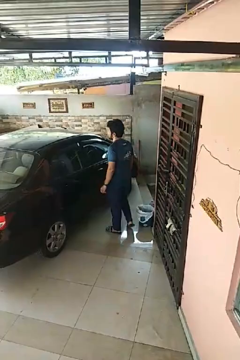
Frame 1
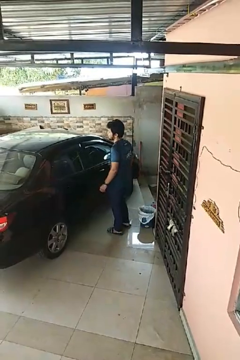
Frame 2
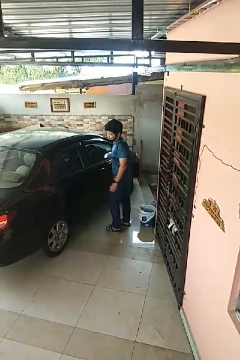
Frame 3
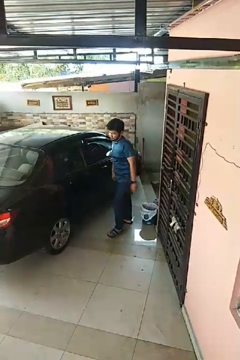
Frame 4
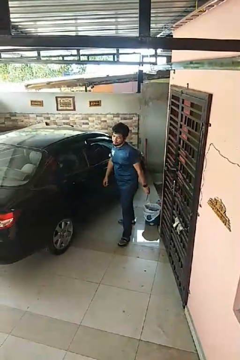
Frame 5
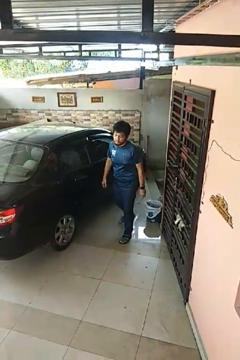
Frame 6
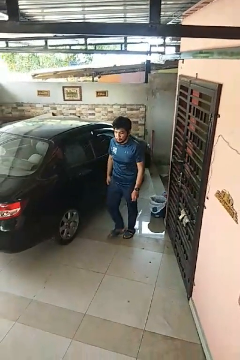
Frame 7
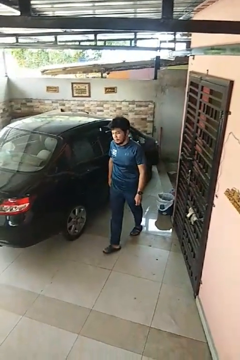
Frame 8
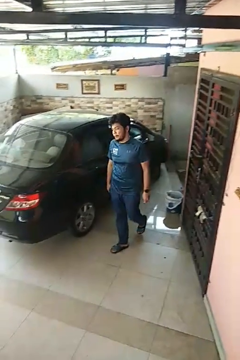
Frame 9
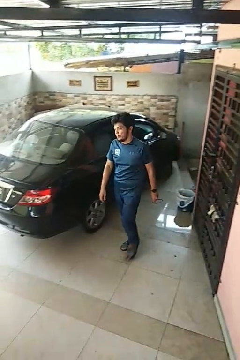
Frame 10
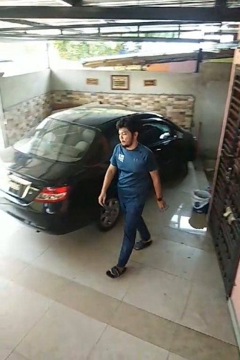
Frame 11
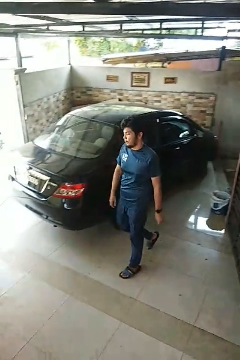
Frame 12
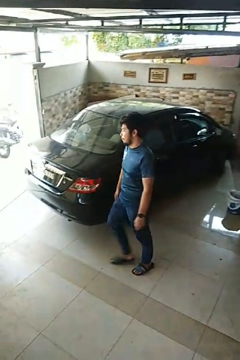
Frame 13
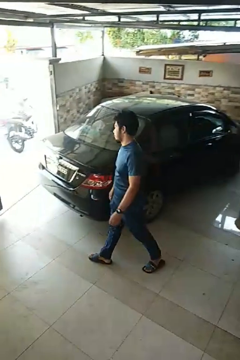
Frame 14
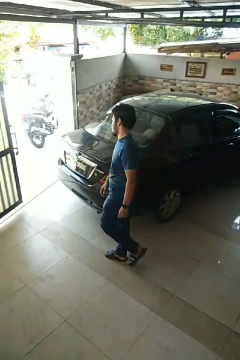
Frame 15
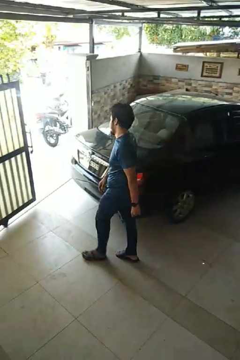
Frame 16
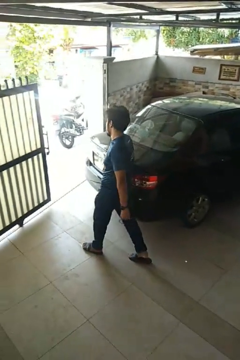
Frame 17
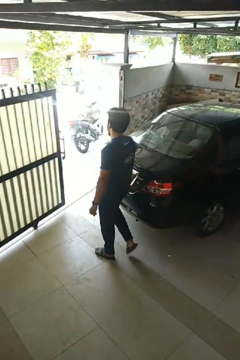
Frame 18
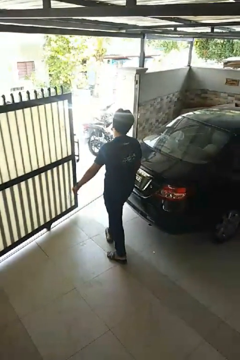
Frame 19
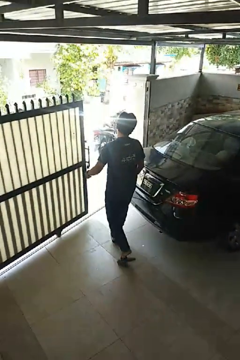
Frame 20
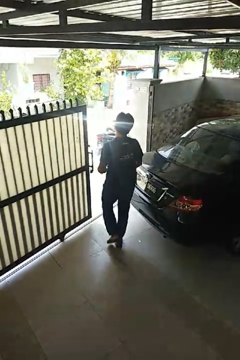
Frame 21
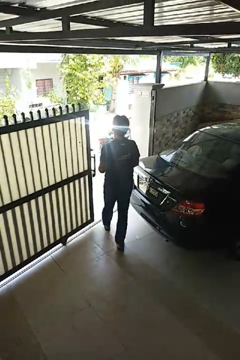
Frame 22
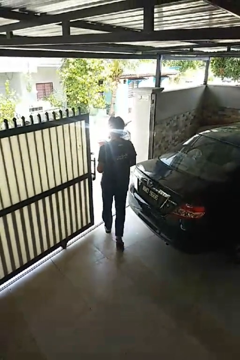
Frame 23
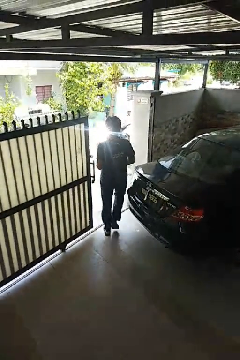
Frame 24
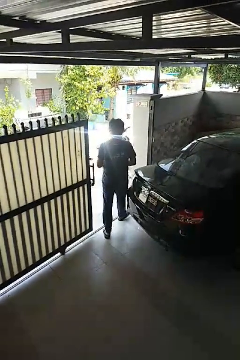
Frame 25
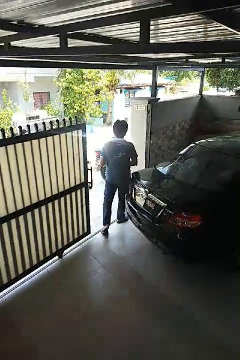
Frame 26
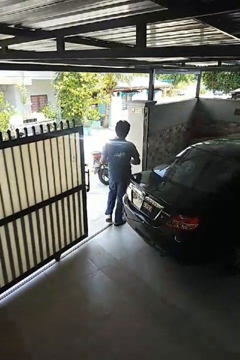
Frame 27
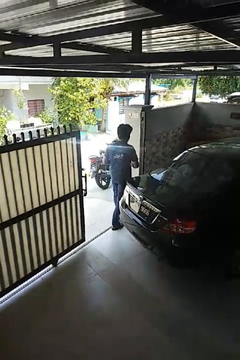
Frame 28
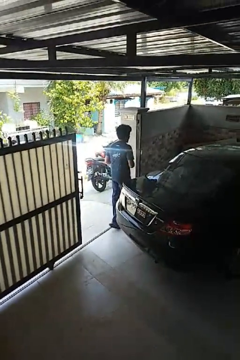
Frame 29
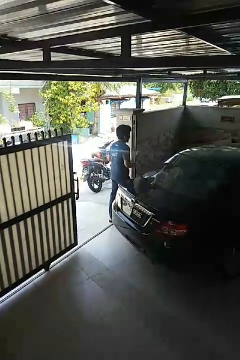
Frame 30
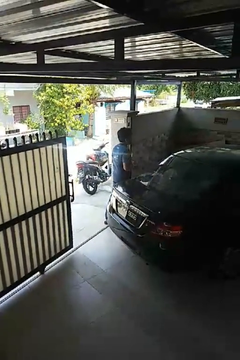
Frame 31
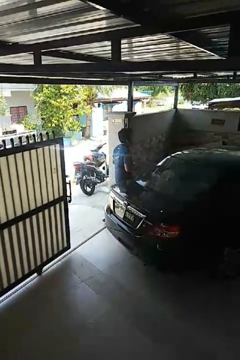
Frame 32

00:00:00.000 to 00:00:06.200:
person walks around car

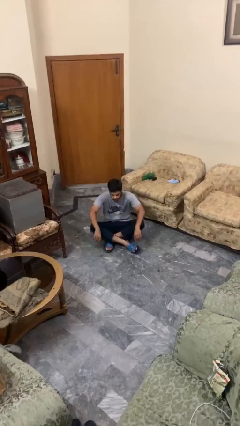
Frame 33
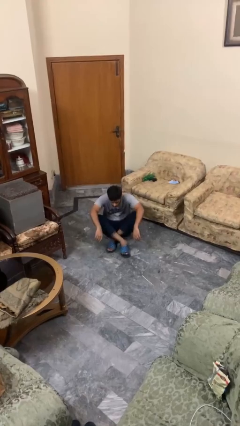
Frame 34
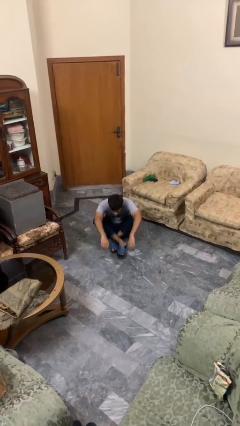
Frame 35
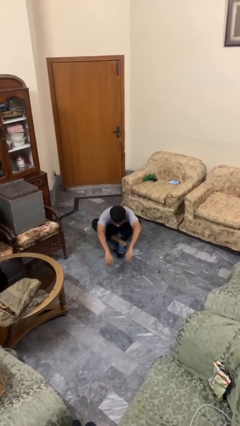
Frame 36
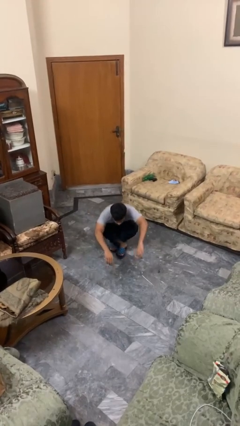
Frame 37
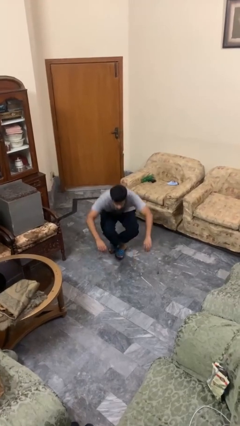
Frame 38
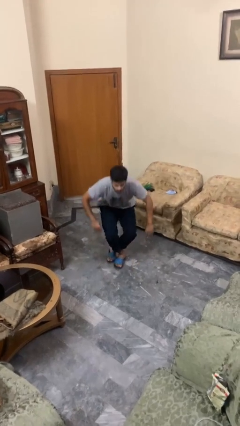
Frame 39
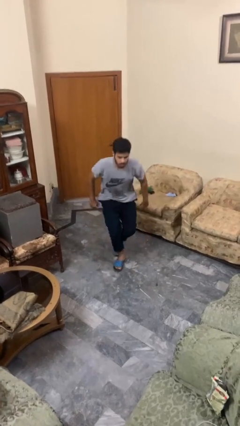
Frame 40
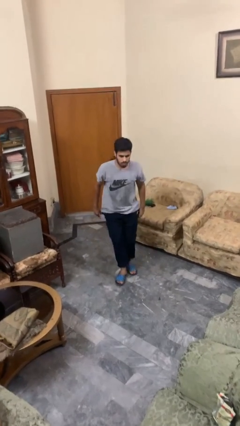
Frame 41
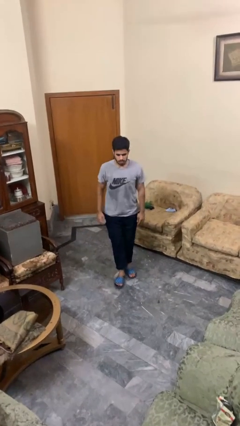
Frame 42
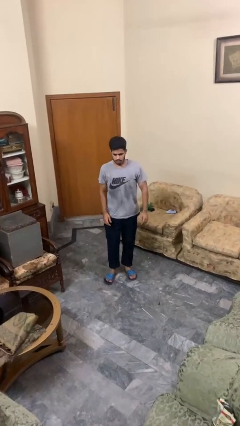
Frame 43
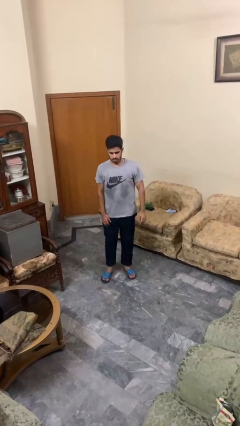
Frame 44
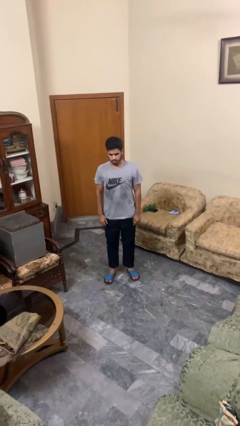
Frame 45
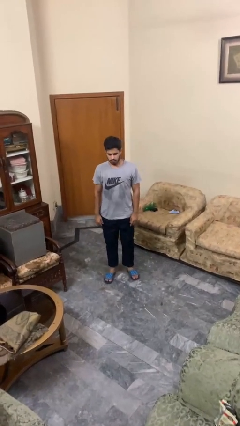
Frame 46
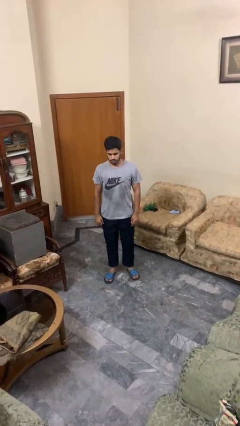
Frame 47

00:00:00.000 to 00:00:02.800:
person stands up from floor

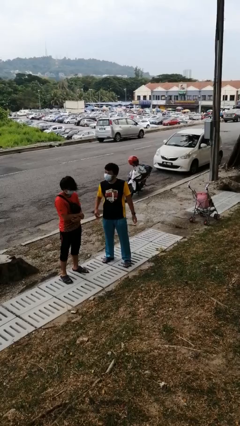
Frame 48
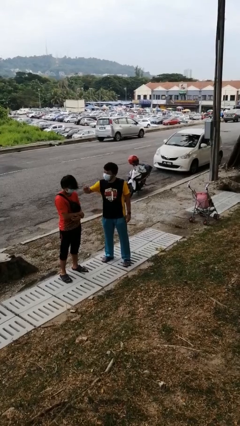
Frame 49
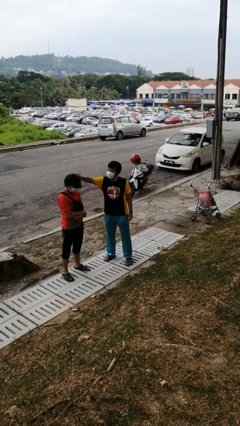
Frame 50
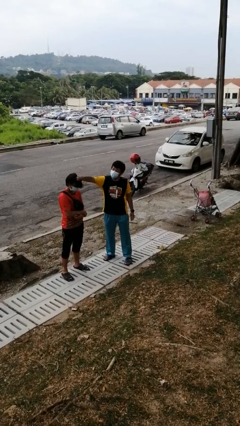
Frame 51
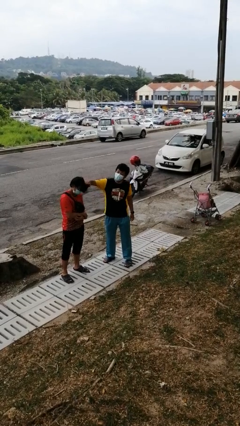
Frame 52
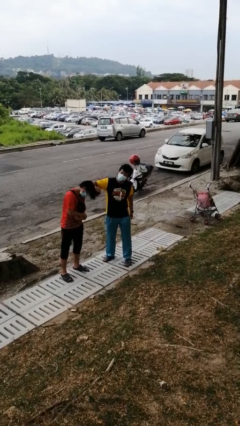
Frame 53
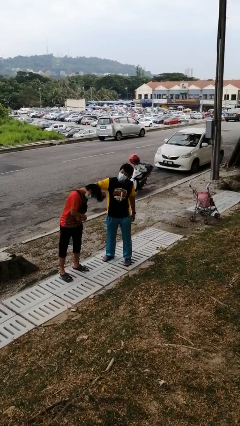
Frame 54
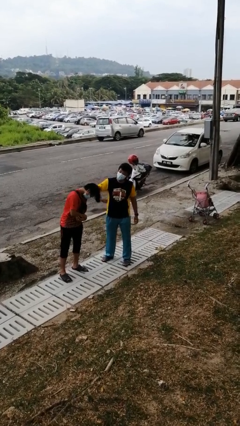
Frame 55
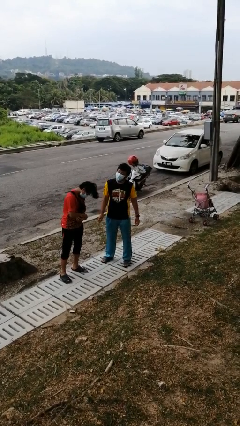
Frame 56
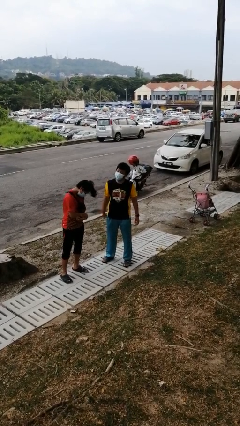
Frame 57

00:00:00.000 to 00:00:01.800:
person grabs person by hair

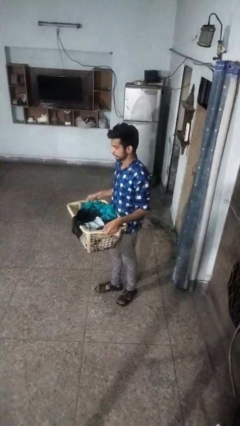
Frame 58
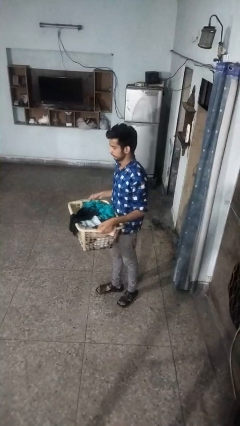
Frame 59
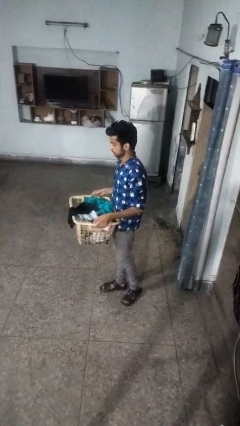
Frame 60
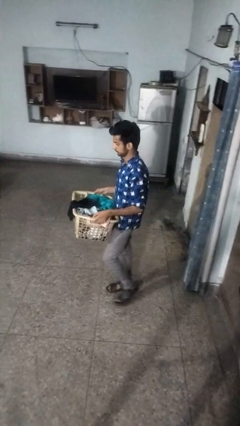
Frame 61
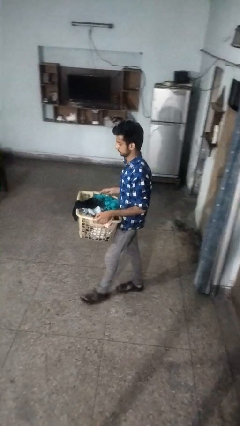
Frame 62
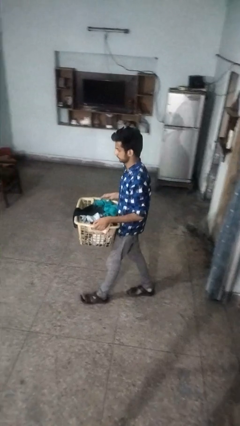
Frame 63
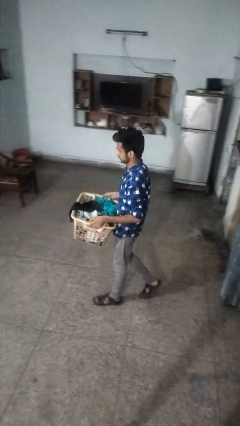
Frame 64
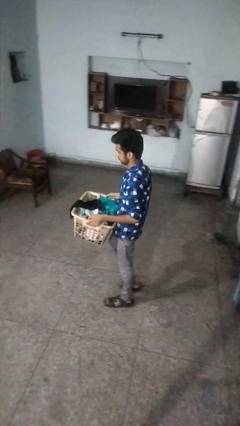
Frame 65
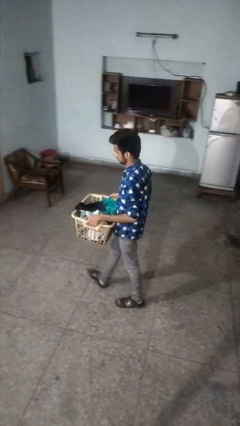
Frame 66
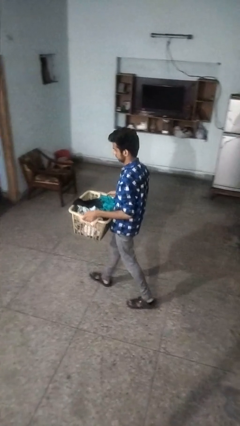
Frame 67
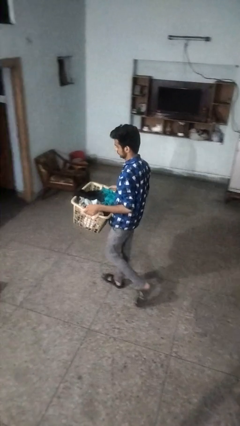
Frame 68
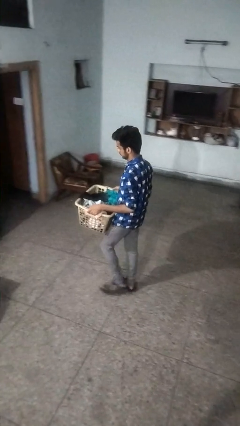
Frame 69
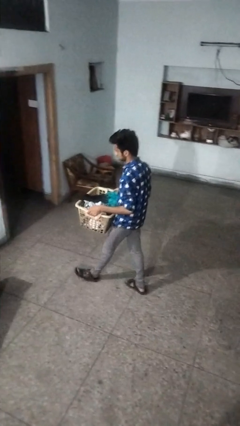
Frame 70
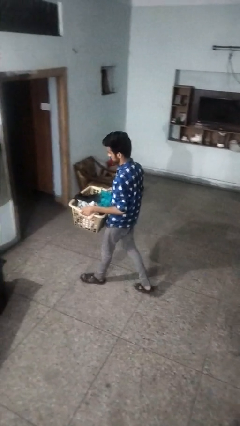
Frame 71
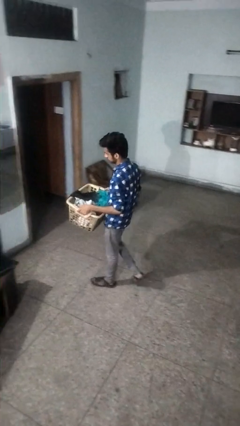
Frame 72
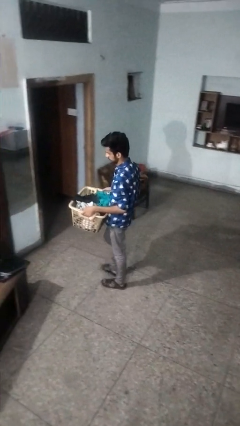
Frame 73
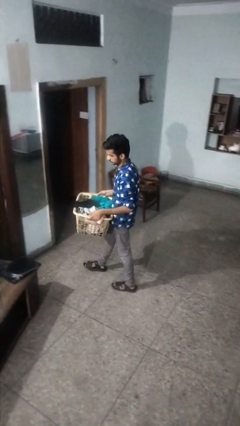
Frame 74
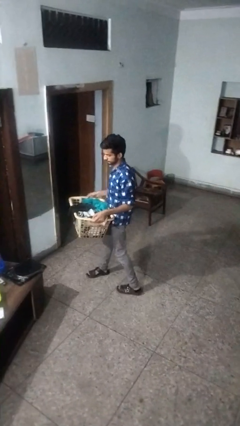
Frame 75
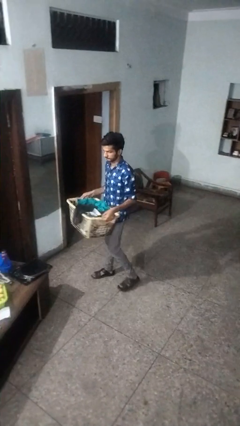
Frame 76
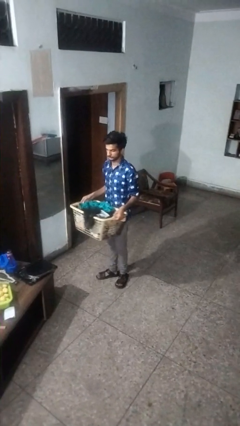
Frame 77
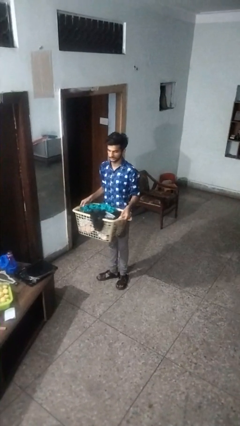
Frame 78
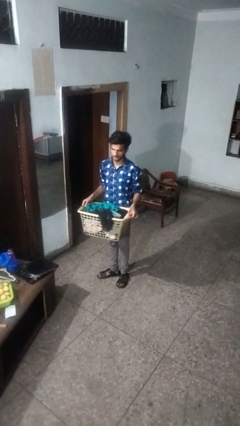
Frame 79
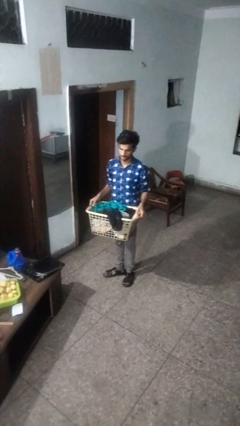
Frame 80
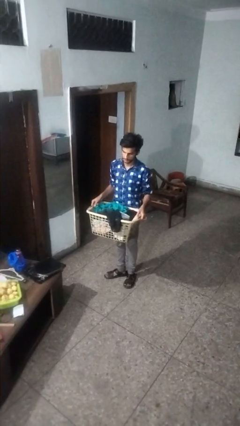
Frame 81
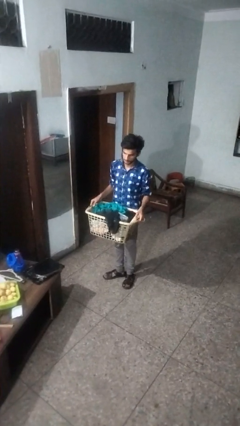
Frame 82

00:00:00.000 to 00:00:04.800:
person carries laundry basket

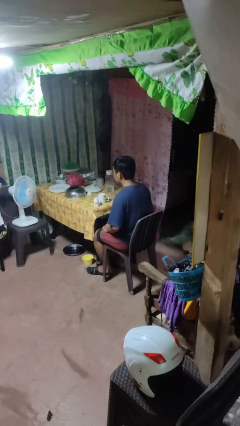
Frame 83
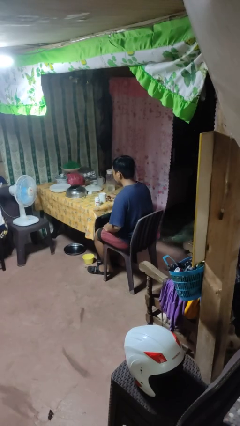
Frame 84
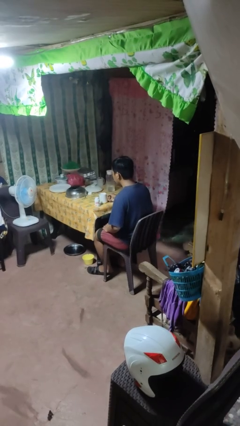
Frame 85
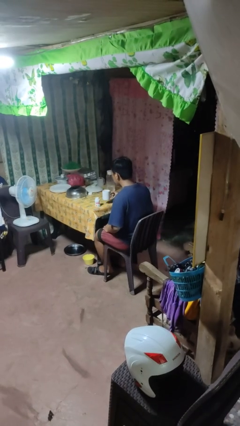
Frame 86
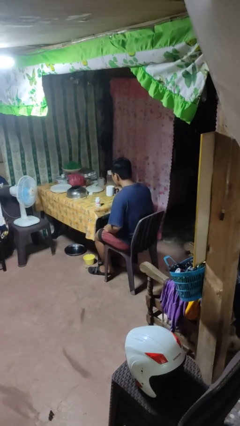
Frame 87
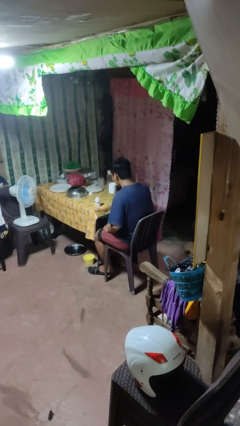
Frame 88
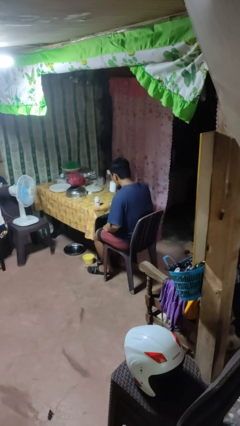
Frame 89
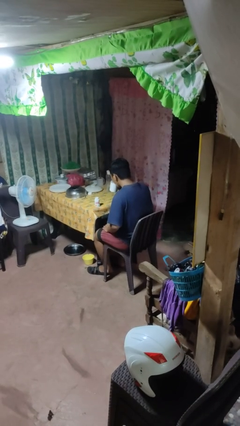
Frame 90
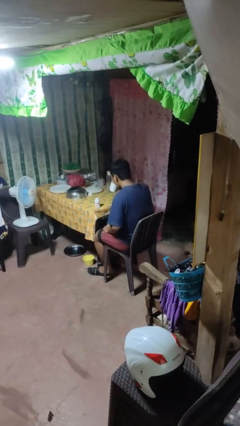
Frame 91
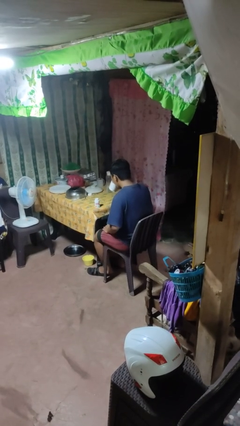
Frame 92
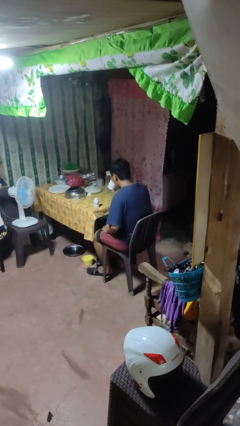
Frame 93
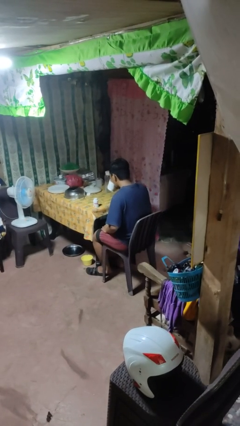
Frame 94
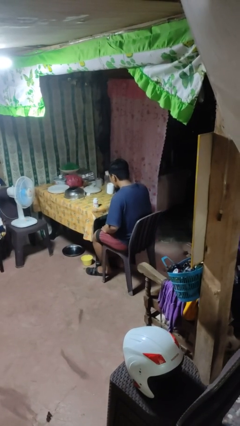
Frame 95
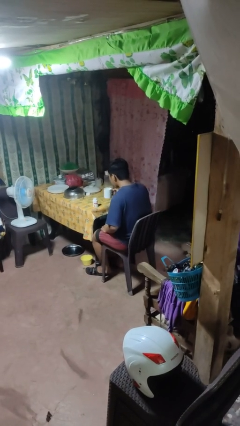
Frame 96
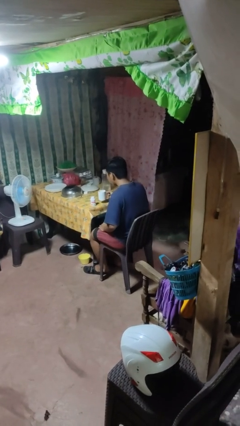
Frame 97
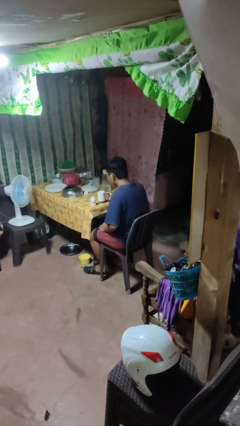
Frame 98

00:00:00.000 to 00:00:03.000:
person drinks from cup
